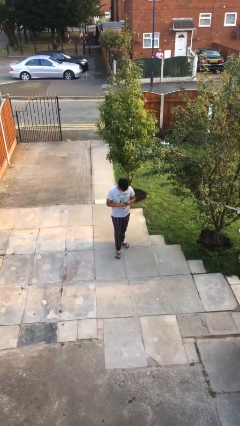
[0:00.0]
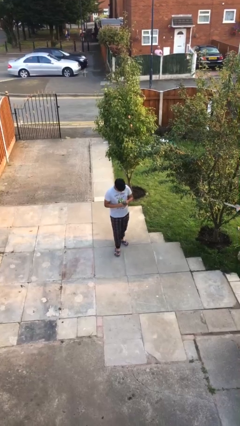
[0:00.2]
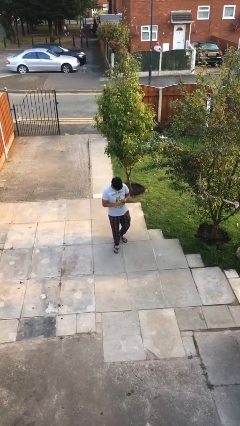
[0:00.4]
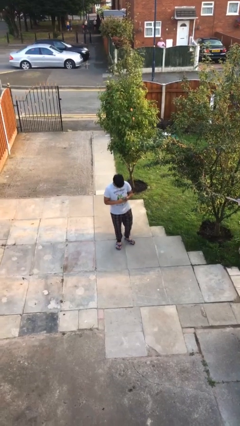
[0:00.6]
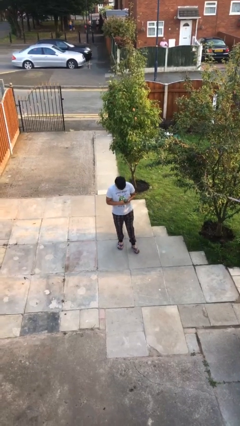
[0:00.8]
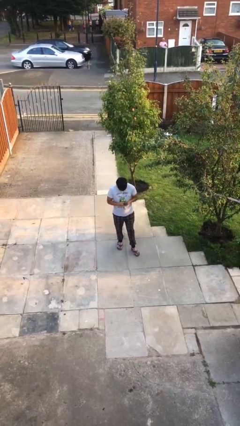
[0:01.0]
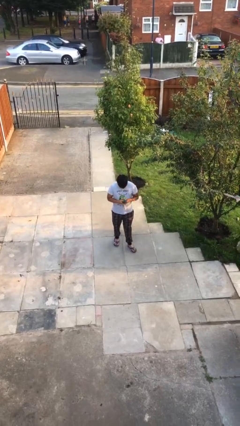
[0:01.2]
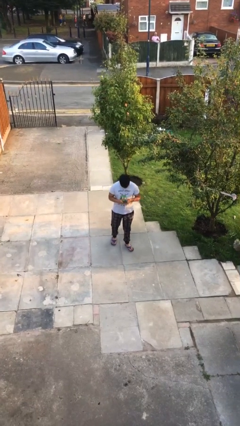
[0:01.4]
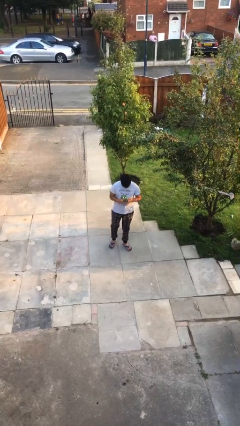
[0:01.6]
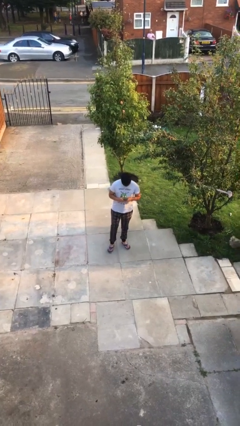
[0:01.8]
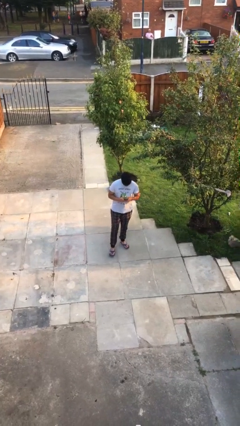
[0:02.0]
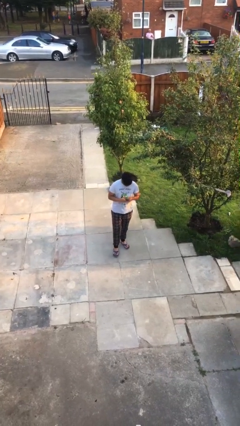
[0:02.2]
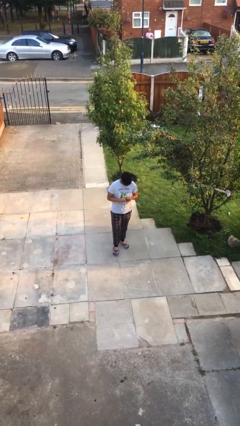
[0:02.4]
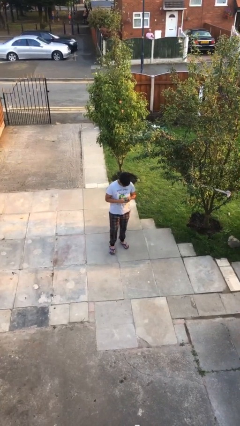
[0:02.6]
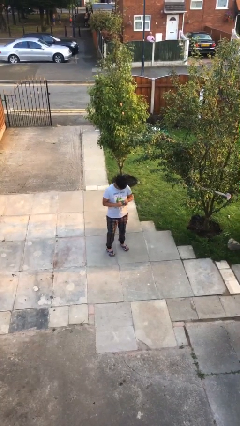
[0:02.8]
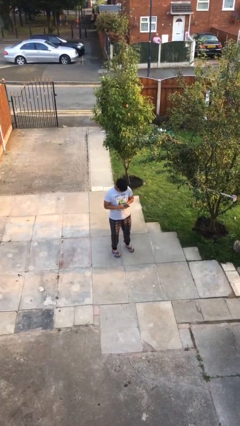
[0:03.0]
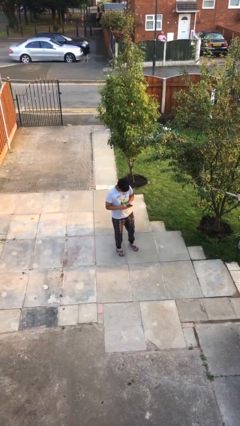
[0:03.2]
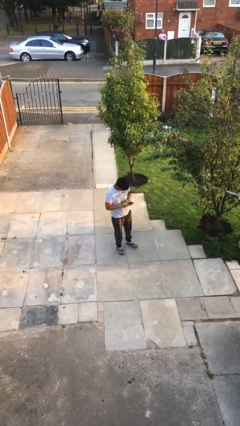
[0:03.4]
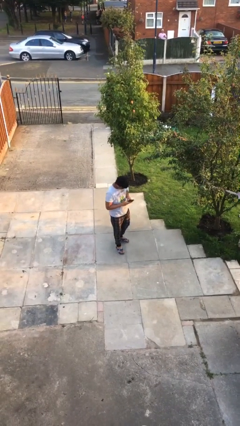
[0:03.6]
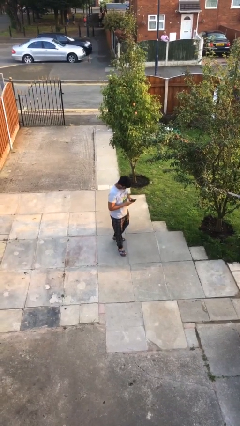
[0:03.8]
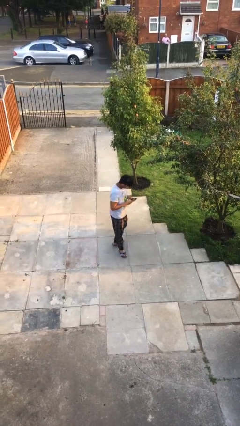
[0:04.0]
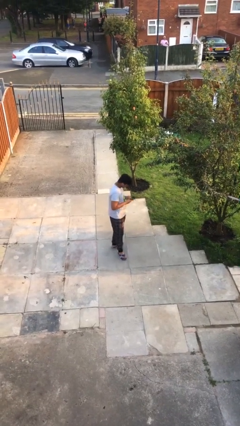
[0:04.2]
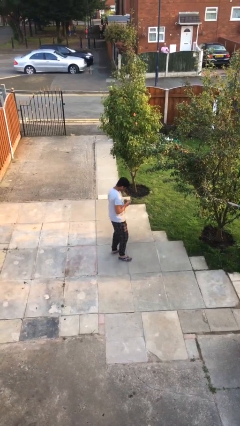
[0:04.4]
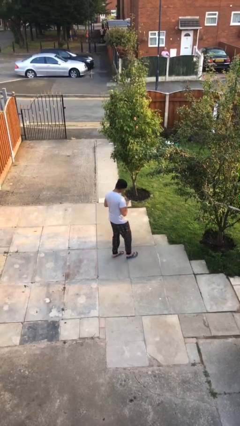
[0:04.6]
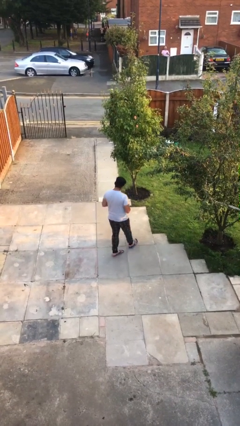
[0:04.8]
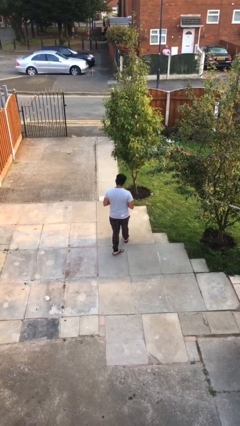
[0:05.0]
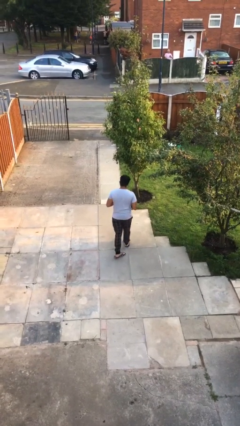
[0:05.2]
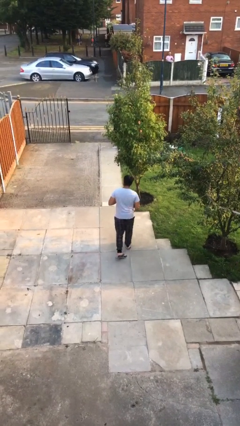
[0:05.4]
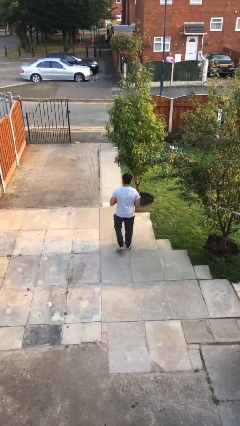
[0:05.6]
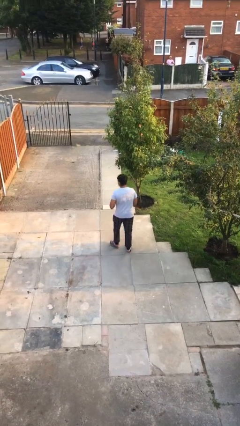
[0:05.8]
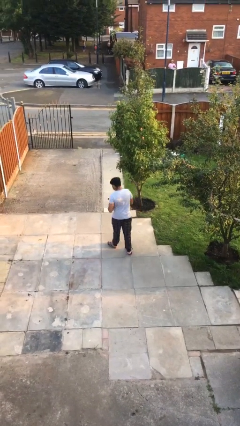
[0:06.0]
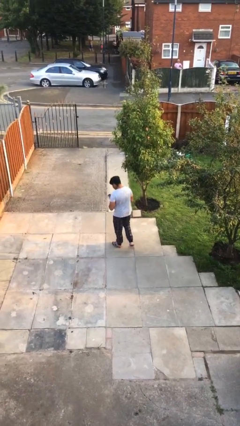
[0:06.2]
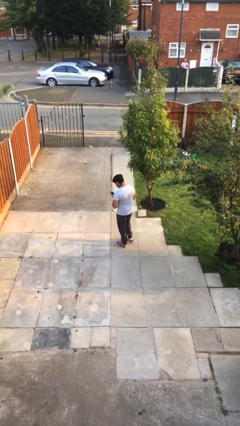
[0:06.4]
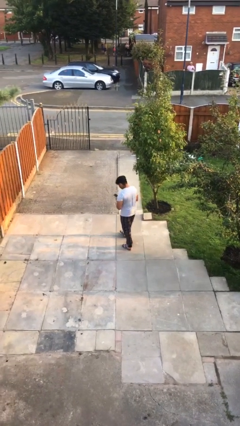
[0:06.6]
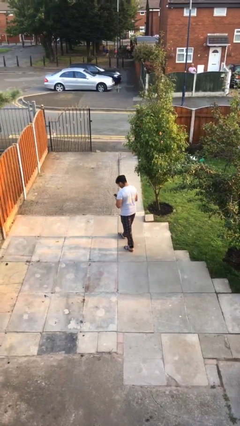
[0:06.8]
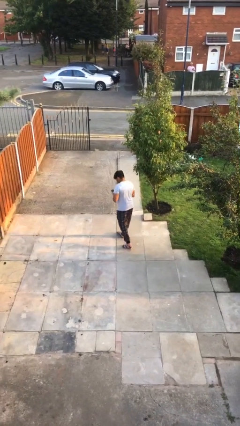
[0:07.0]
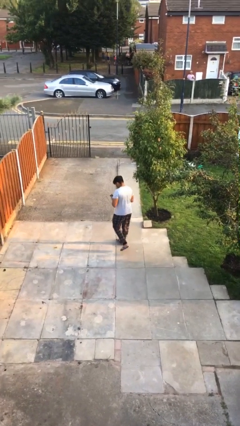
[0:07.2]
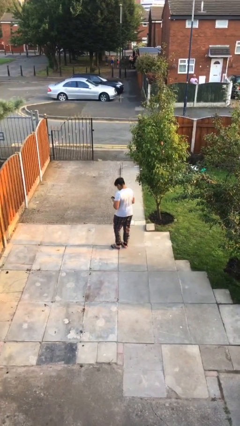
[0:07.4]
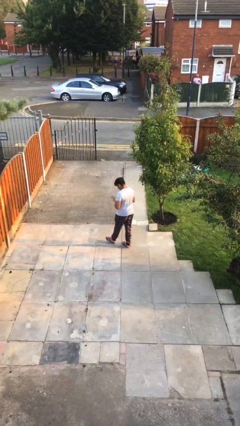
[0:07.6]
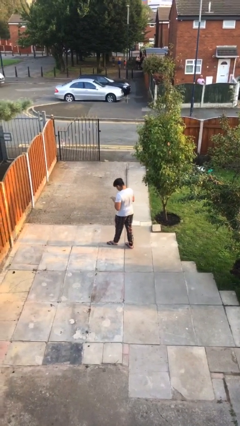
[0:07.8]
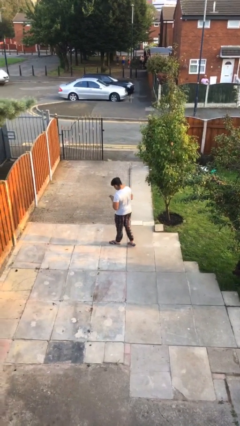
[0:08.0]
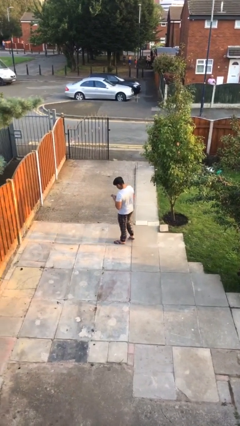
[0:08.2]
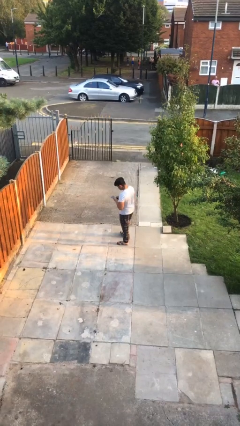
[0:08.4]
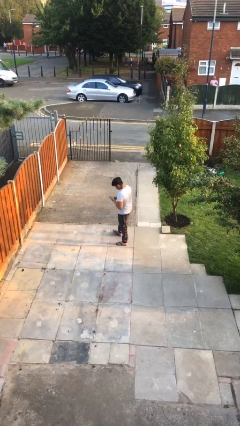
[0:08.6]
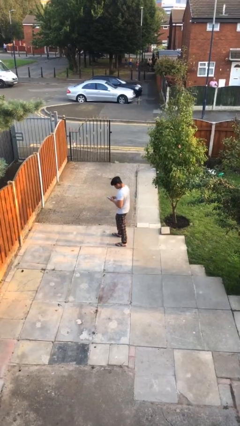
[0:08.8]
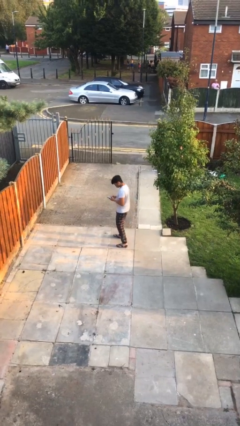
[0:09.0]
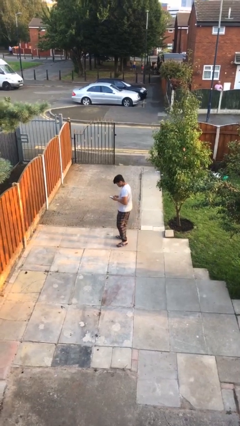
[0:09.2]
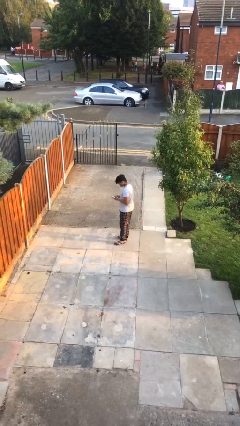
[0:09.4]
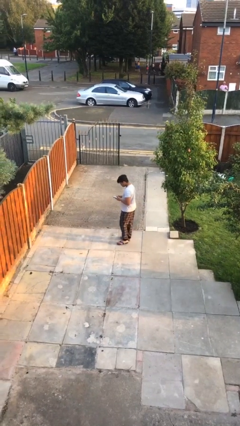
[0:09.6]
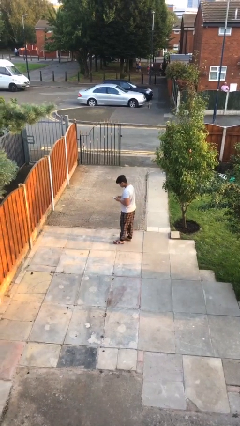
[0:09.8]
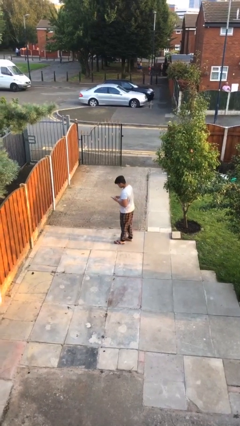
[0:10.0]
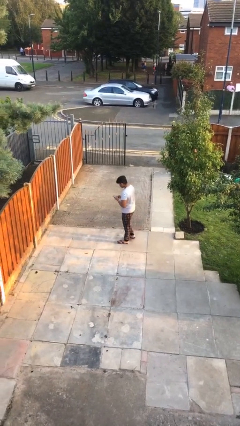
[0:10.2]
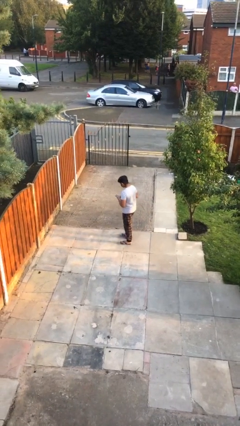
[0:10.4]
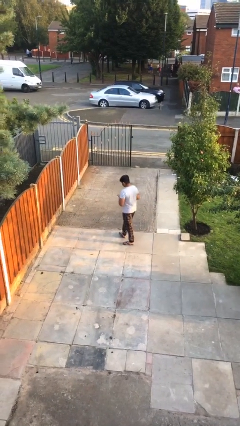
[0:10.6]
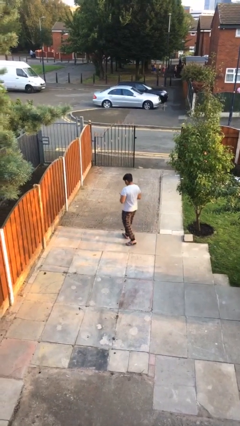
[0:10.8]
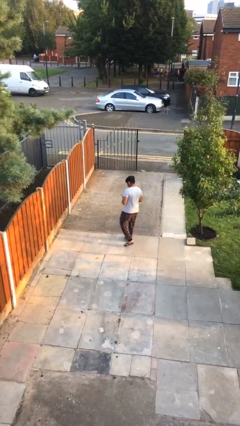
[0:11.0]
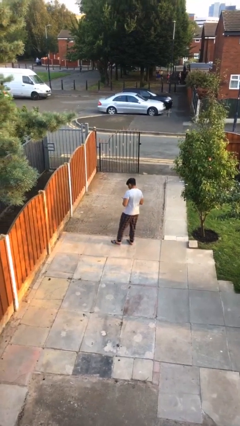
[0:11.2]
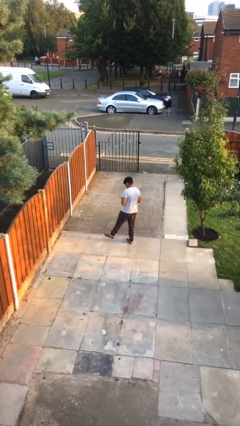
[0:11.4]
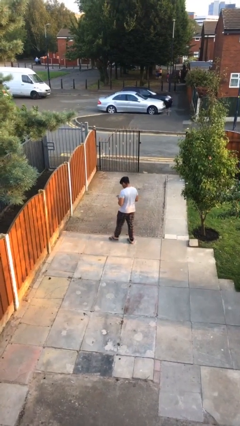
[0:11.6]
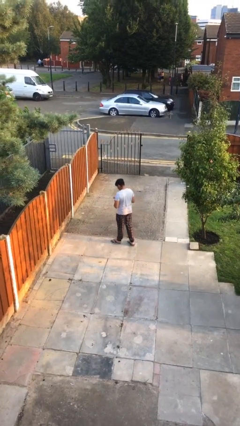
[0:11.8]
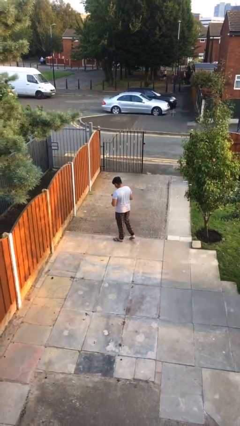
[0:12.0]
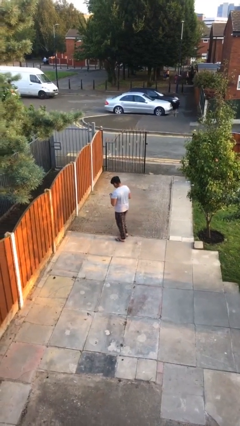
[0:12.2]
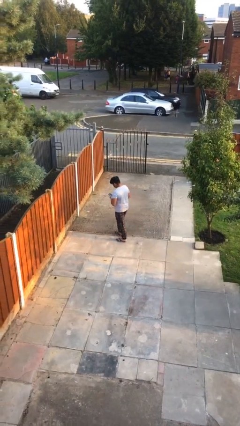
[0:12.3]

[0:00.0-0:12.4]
person texts on phone

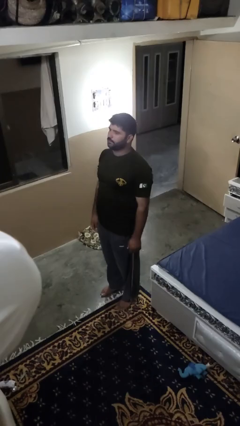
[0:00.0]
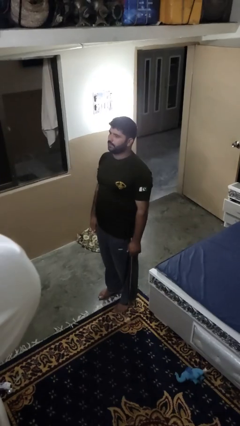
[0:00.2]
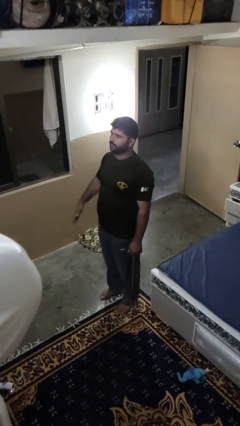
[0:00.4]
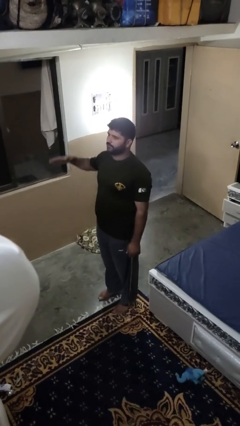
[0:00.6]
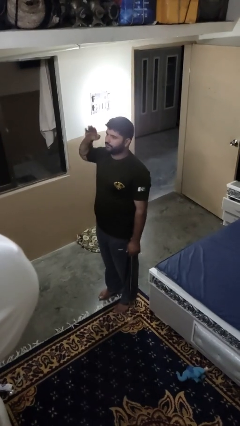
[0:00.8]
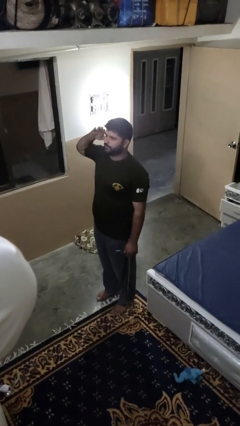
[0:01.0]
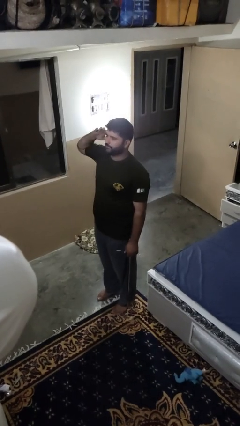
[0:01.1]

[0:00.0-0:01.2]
person salutes

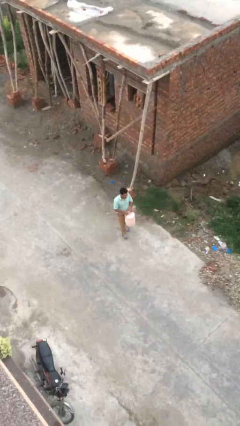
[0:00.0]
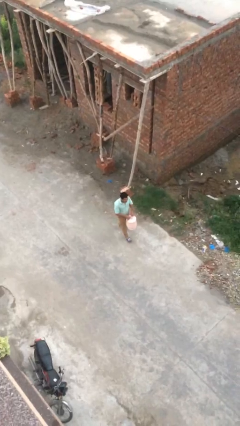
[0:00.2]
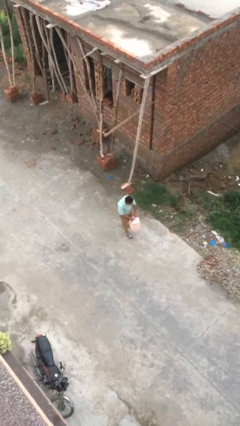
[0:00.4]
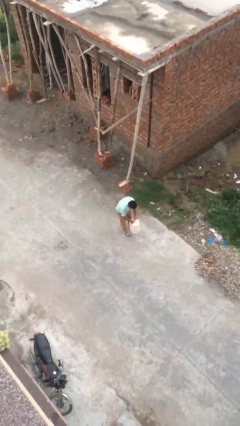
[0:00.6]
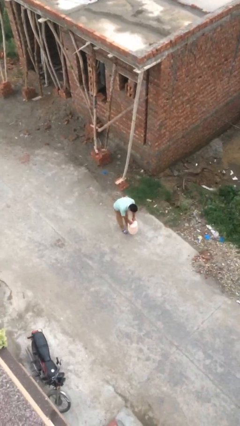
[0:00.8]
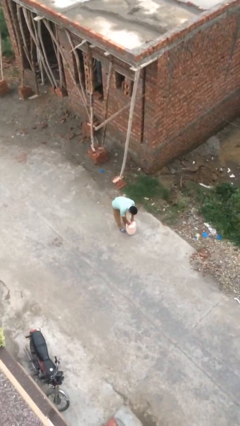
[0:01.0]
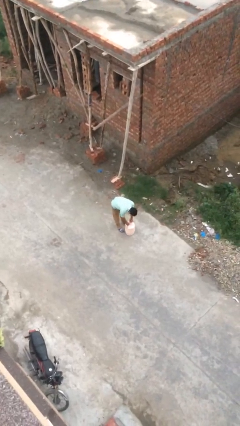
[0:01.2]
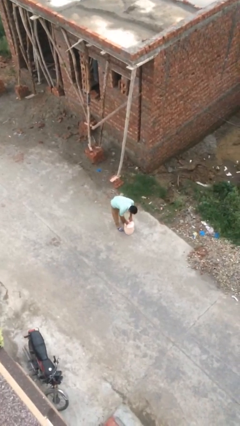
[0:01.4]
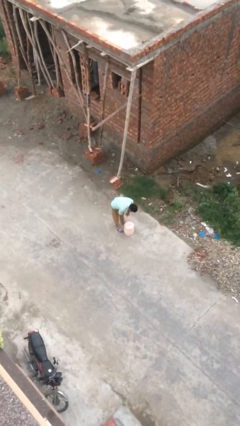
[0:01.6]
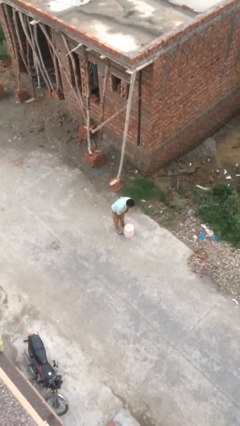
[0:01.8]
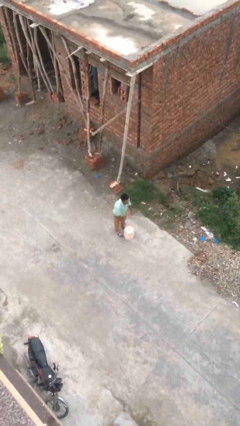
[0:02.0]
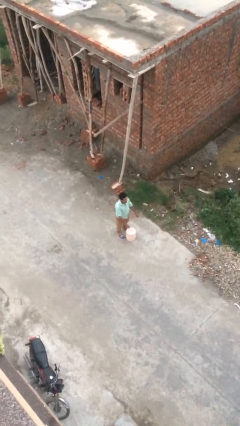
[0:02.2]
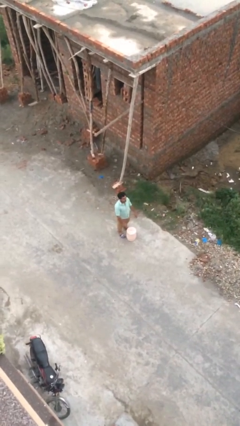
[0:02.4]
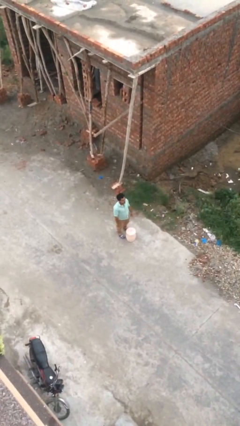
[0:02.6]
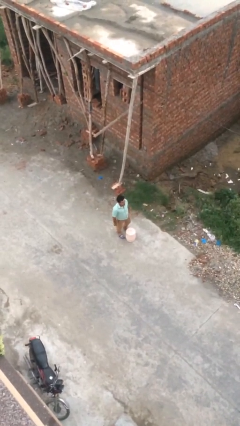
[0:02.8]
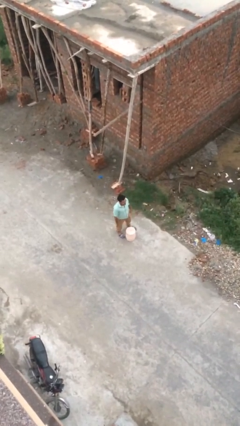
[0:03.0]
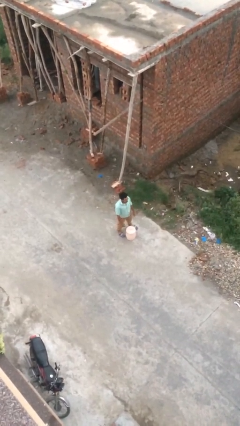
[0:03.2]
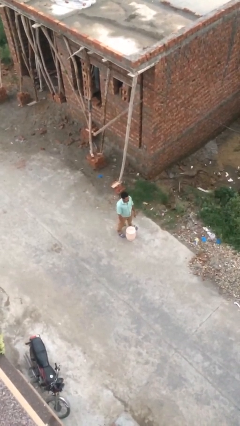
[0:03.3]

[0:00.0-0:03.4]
person puts down object on floor

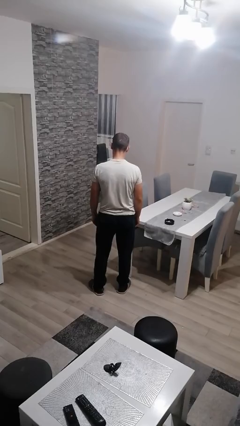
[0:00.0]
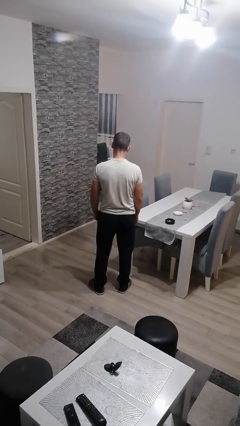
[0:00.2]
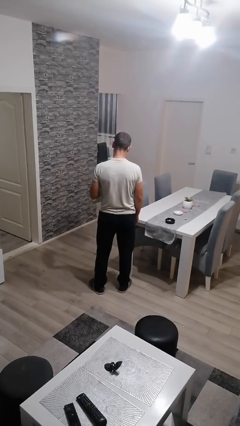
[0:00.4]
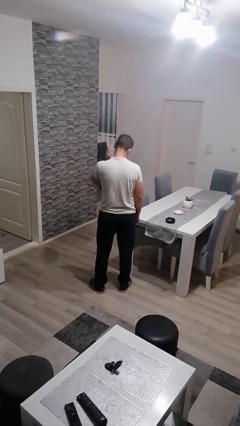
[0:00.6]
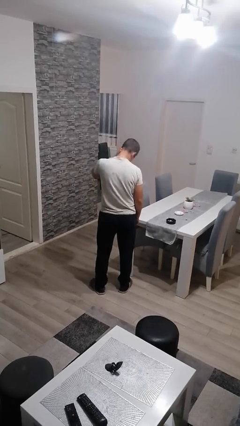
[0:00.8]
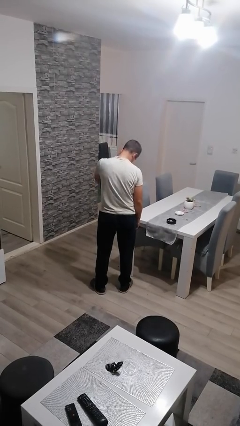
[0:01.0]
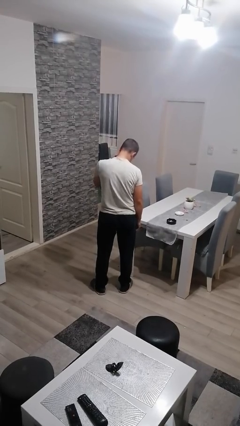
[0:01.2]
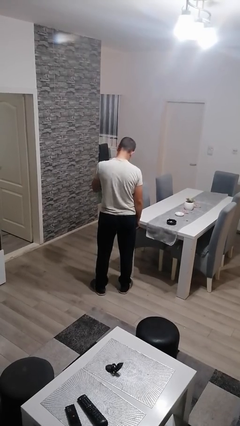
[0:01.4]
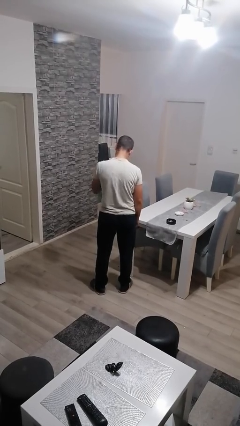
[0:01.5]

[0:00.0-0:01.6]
person swats bug
